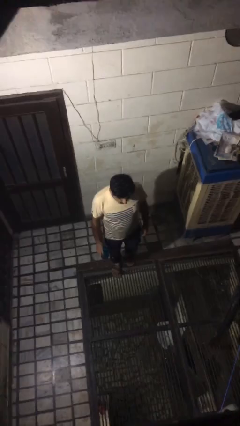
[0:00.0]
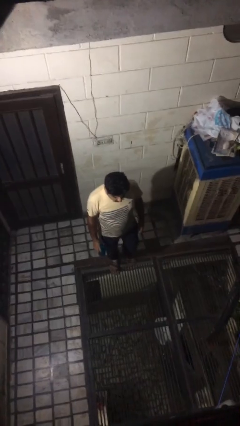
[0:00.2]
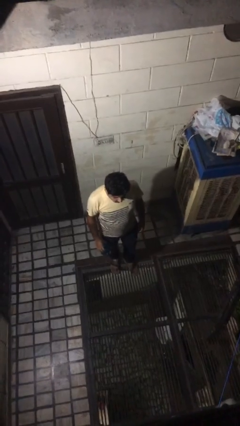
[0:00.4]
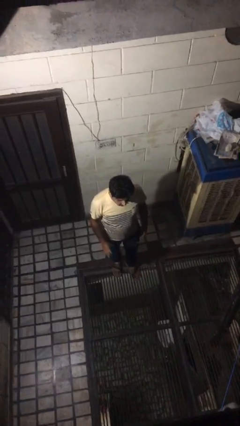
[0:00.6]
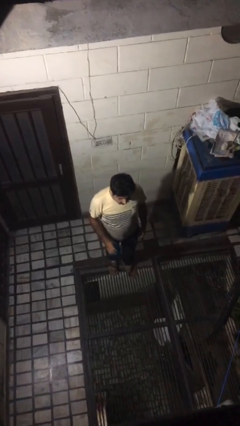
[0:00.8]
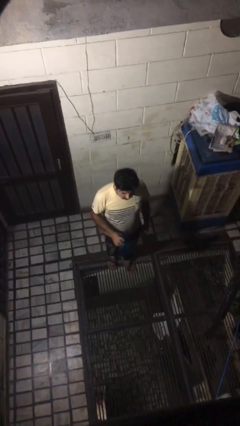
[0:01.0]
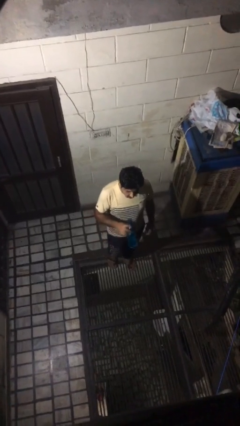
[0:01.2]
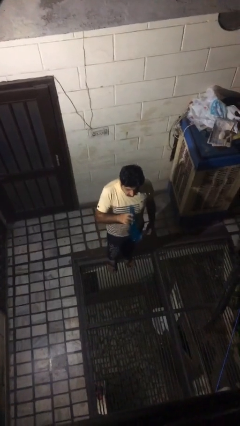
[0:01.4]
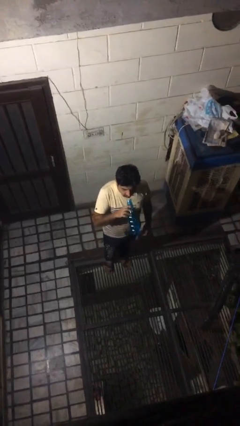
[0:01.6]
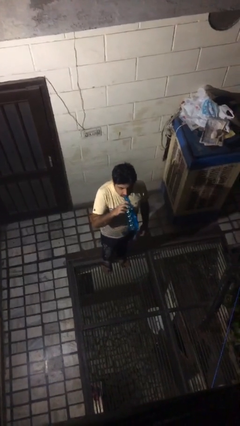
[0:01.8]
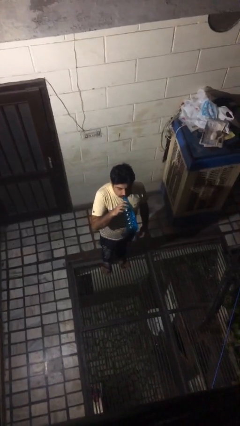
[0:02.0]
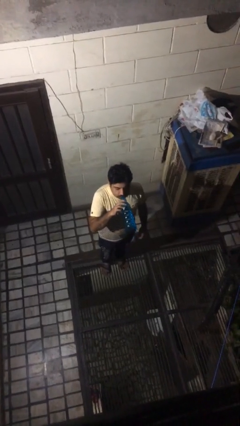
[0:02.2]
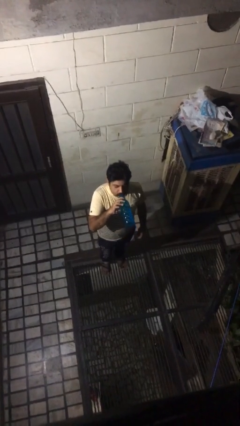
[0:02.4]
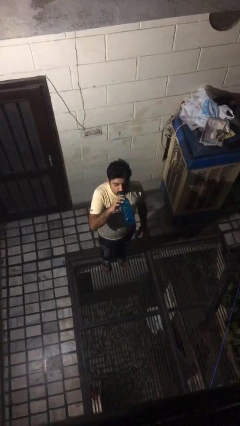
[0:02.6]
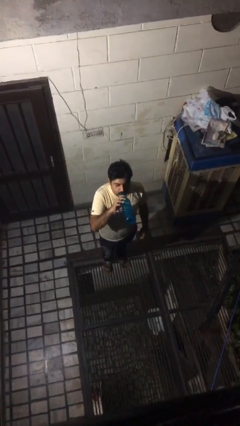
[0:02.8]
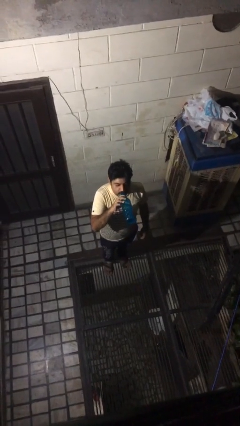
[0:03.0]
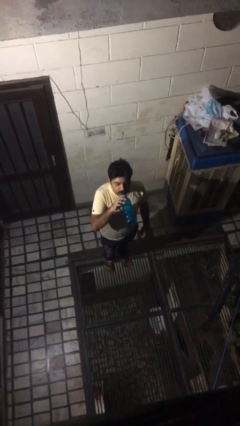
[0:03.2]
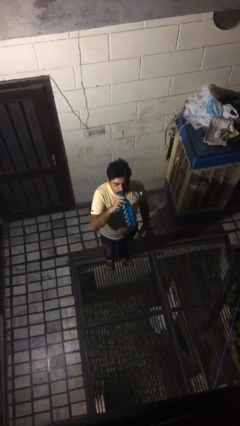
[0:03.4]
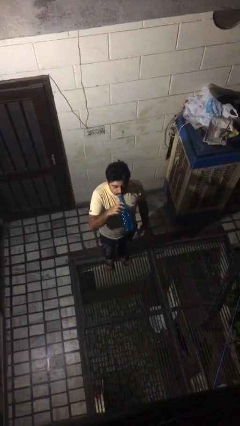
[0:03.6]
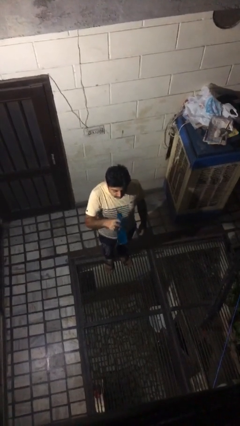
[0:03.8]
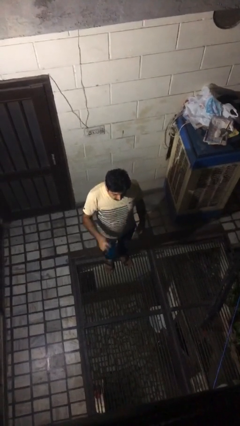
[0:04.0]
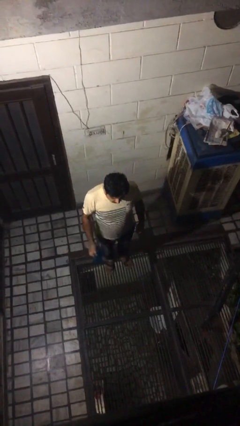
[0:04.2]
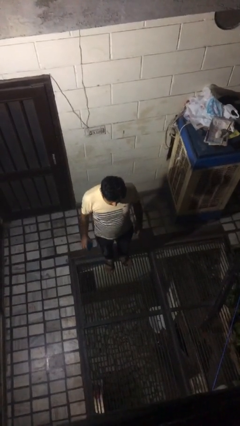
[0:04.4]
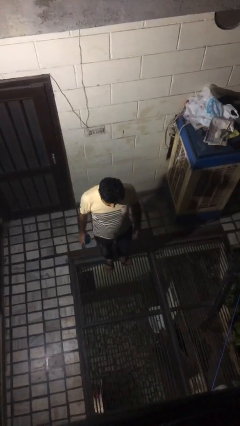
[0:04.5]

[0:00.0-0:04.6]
person drinks from bottle

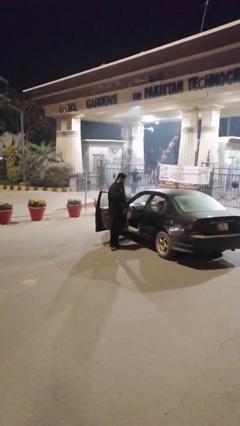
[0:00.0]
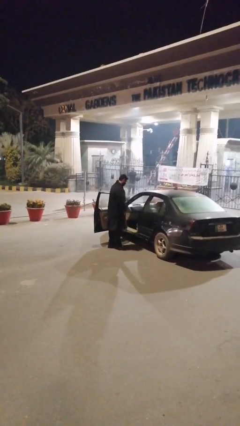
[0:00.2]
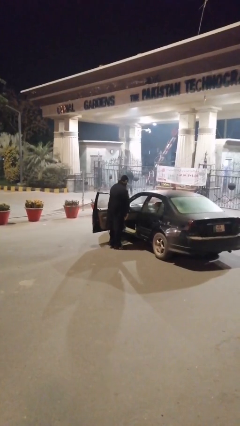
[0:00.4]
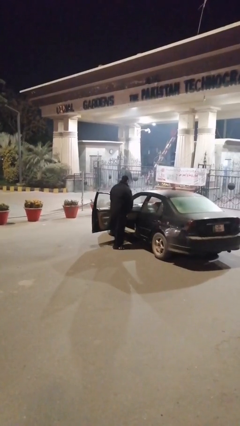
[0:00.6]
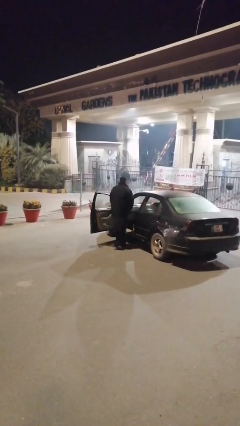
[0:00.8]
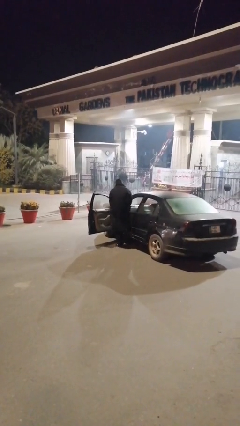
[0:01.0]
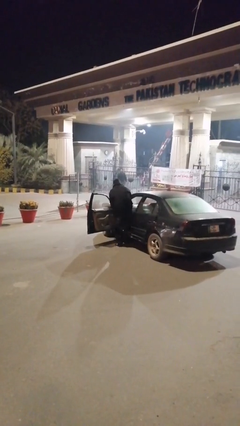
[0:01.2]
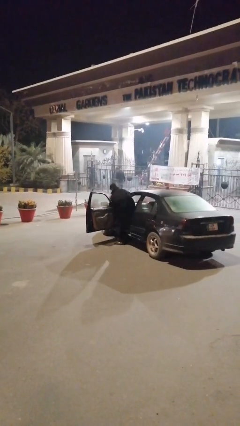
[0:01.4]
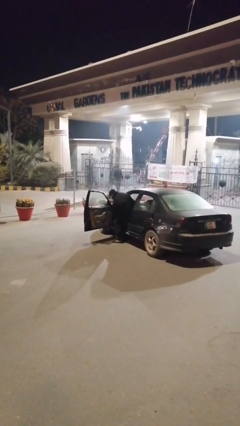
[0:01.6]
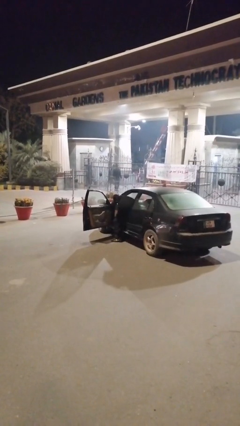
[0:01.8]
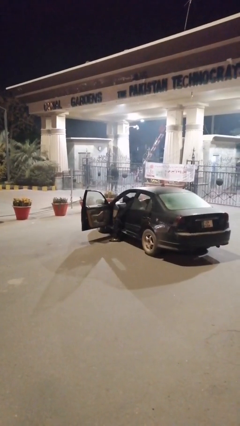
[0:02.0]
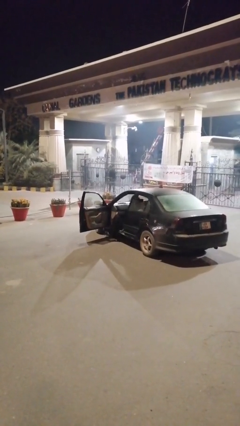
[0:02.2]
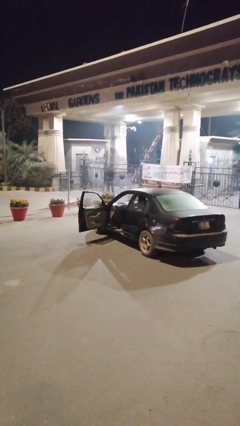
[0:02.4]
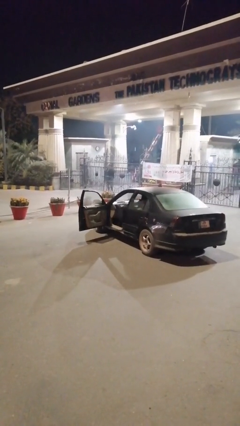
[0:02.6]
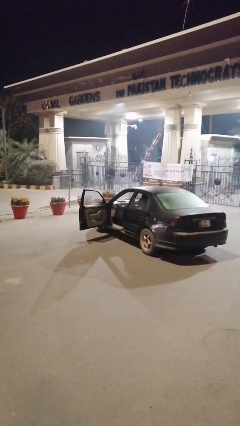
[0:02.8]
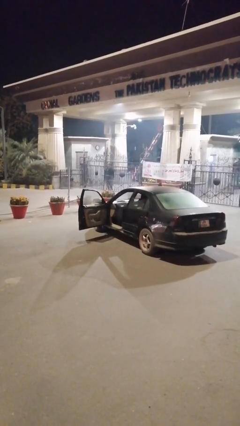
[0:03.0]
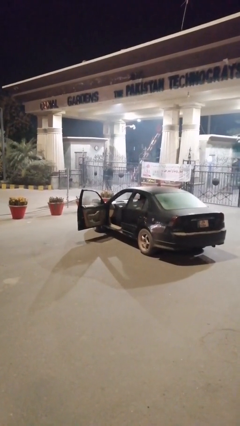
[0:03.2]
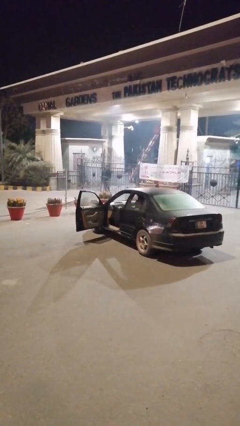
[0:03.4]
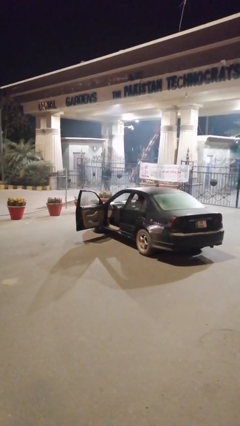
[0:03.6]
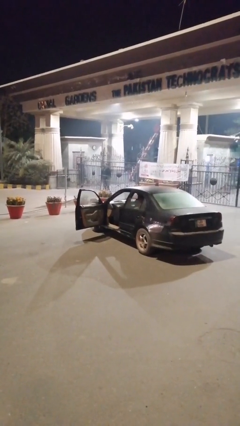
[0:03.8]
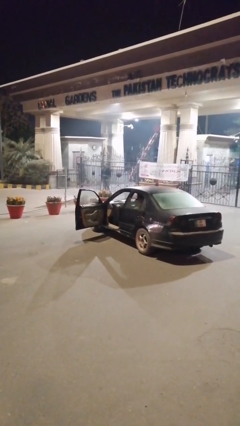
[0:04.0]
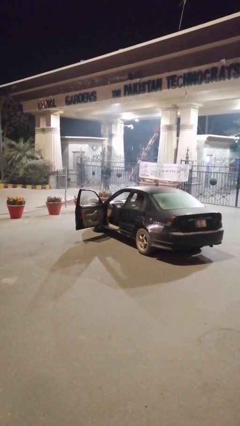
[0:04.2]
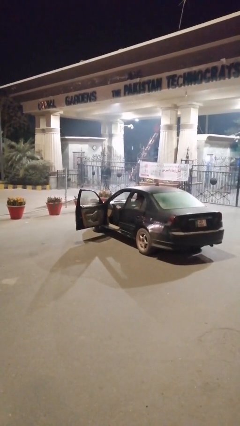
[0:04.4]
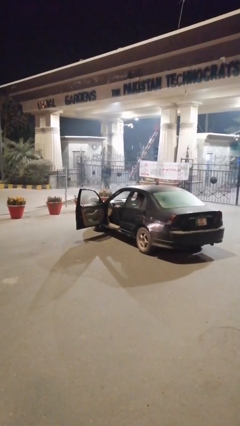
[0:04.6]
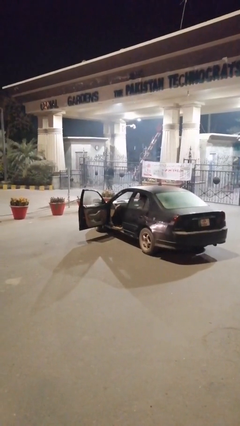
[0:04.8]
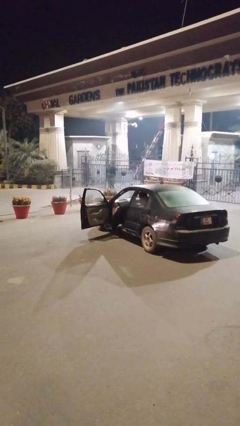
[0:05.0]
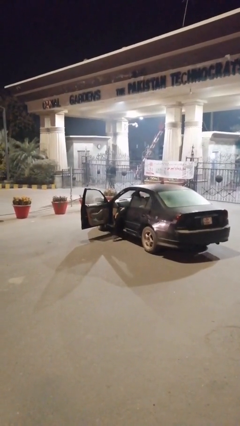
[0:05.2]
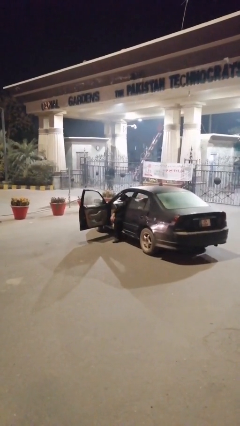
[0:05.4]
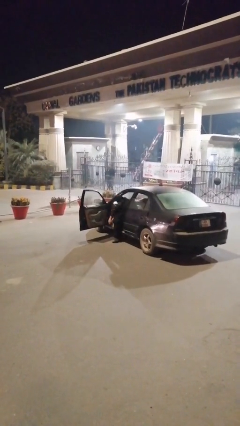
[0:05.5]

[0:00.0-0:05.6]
person enters car

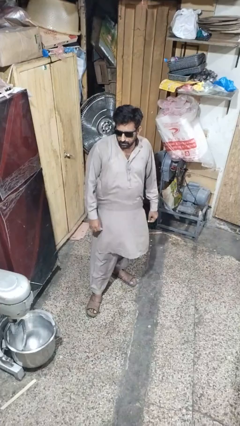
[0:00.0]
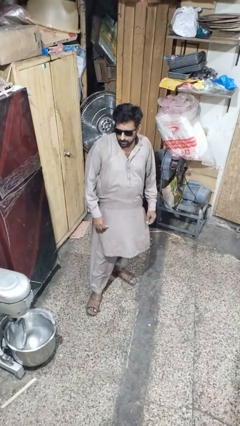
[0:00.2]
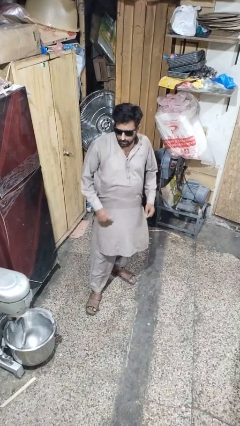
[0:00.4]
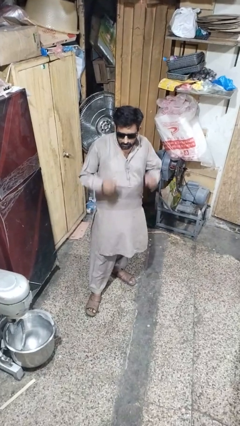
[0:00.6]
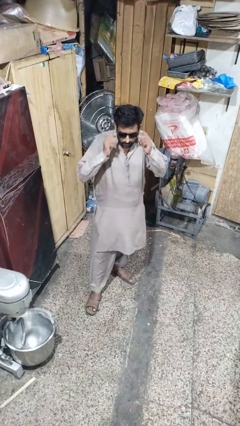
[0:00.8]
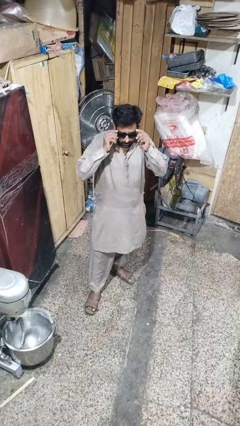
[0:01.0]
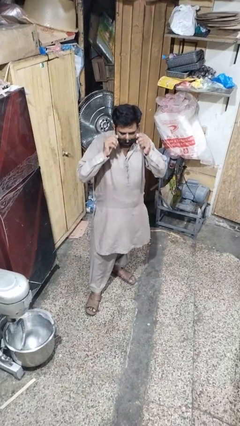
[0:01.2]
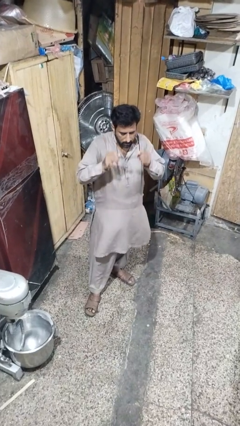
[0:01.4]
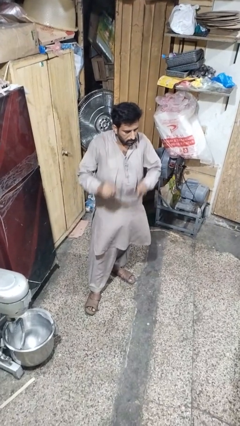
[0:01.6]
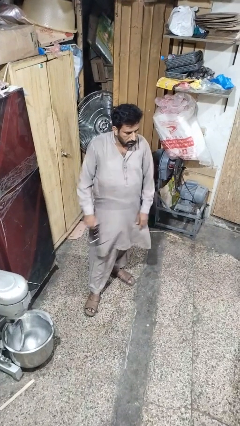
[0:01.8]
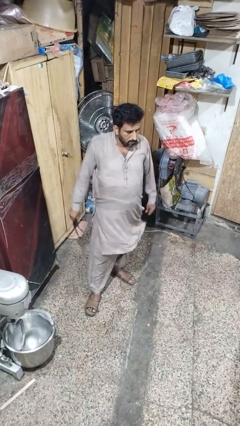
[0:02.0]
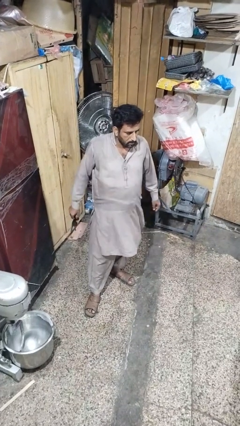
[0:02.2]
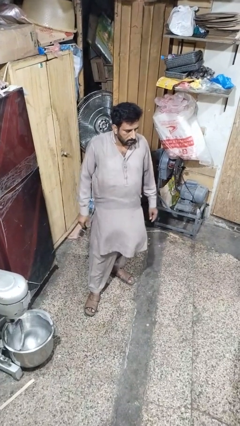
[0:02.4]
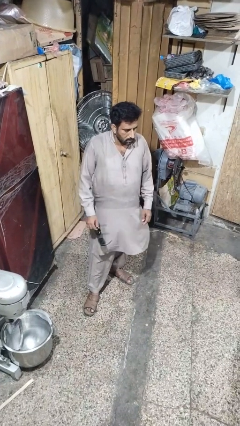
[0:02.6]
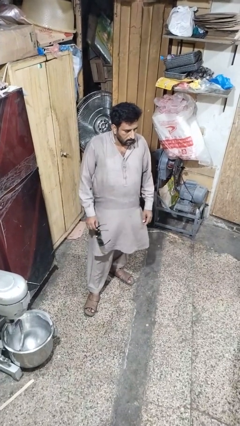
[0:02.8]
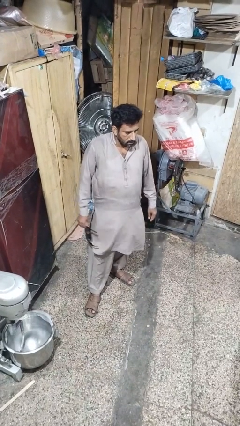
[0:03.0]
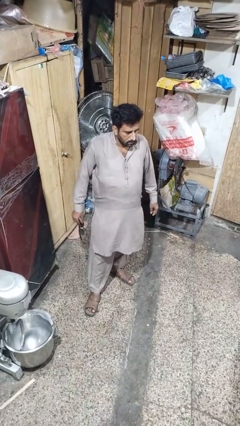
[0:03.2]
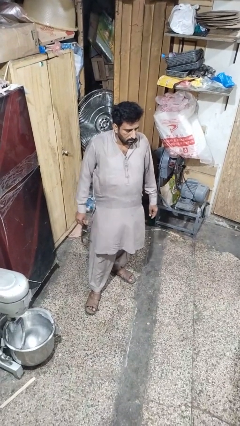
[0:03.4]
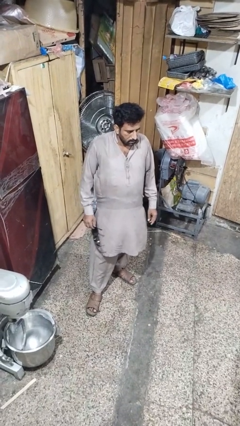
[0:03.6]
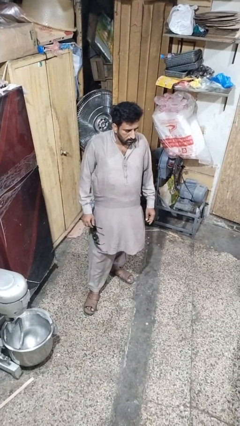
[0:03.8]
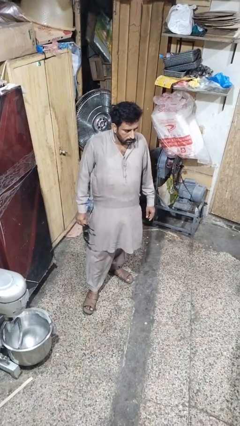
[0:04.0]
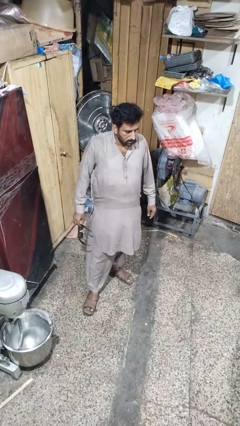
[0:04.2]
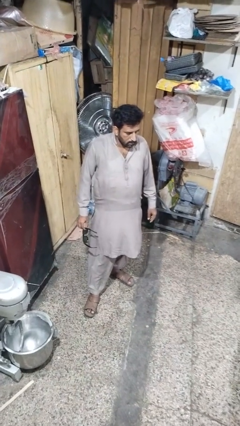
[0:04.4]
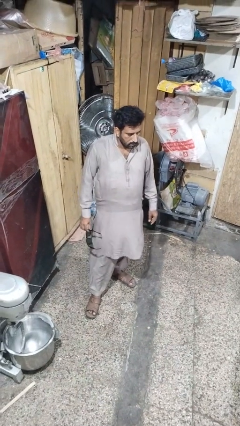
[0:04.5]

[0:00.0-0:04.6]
person takes off sunglasses

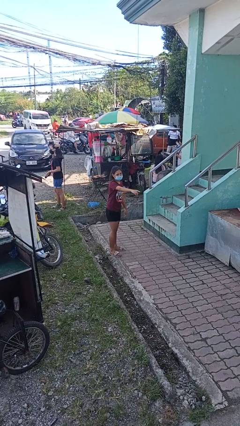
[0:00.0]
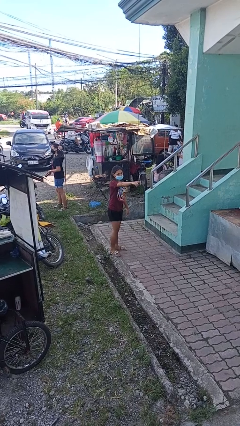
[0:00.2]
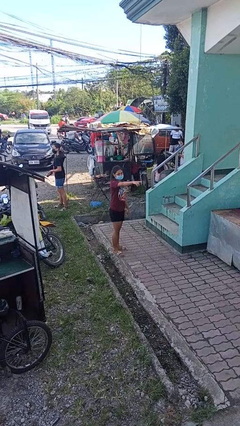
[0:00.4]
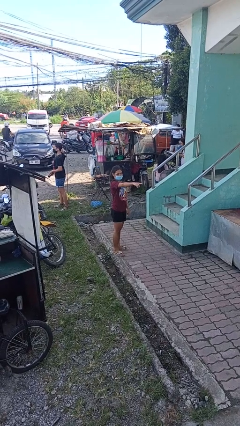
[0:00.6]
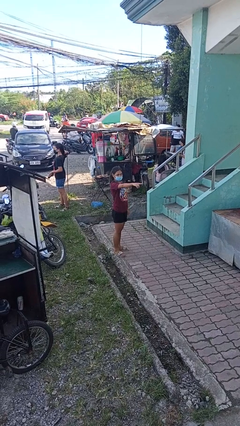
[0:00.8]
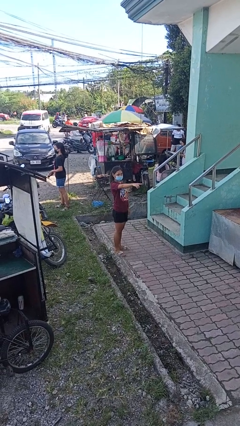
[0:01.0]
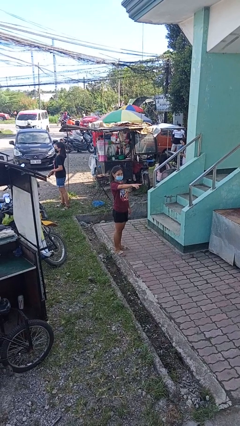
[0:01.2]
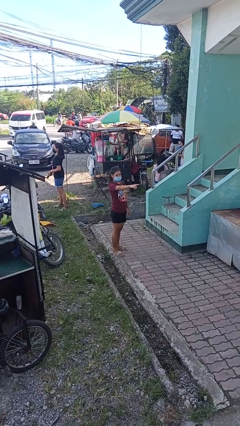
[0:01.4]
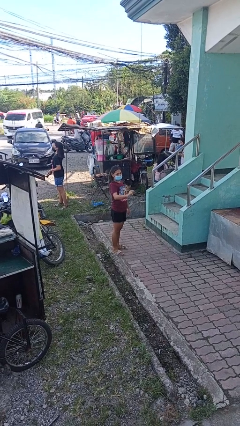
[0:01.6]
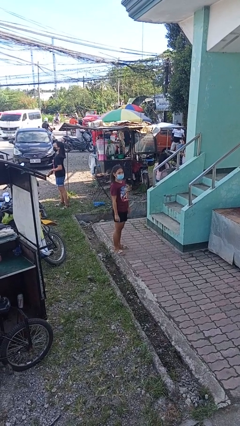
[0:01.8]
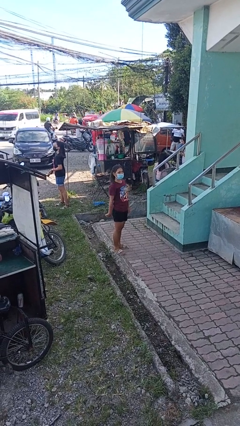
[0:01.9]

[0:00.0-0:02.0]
person points at person

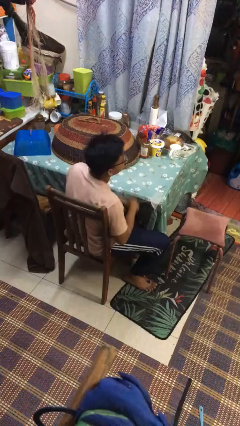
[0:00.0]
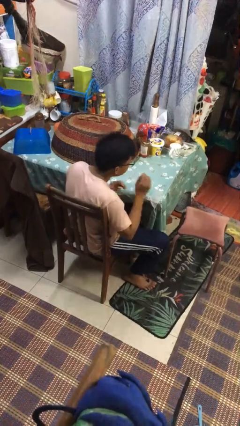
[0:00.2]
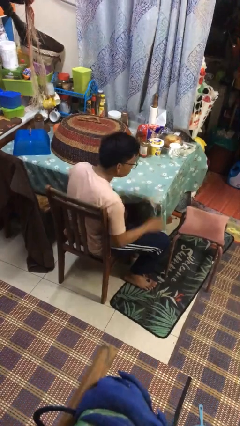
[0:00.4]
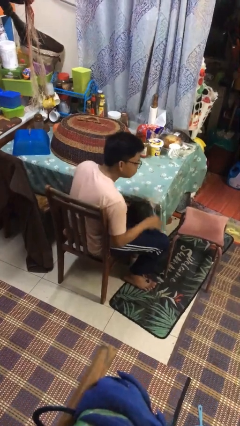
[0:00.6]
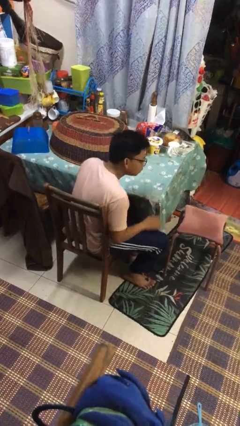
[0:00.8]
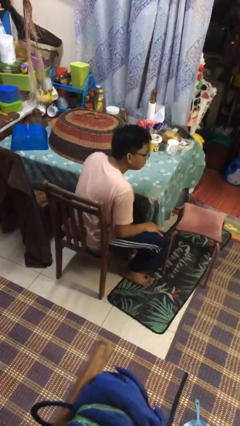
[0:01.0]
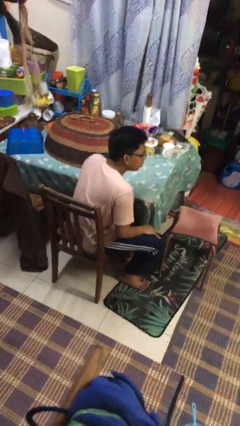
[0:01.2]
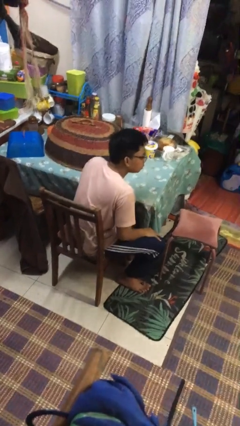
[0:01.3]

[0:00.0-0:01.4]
person slaps hands on thighs
